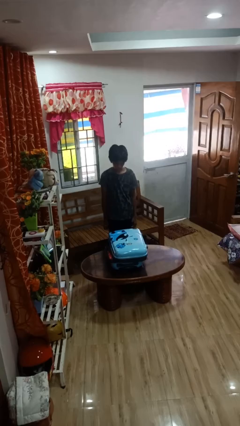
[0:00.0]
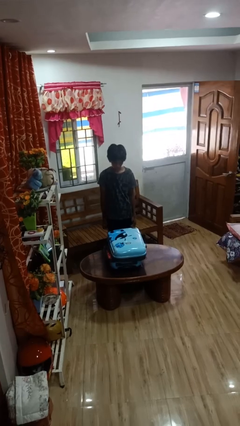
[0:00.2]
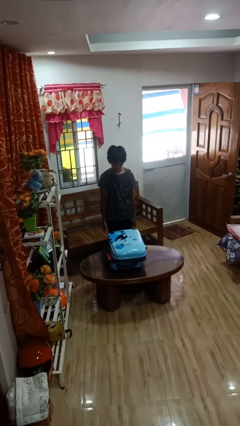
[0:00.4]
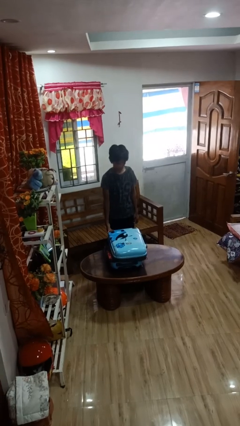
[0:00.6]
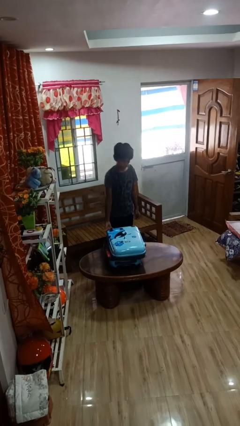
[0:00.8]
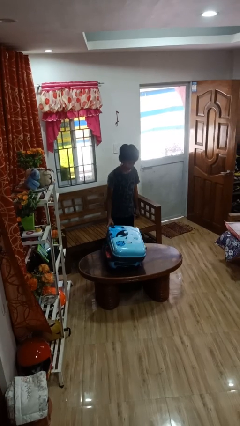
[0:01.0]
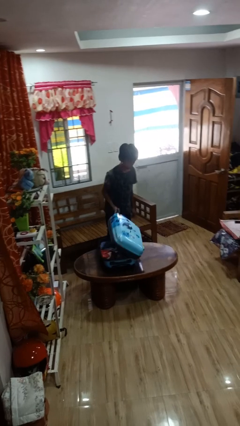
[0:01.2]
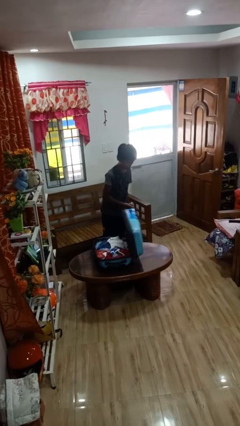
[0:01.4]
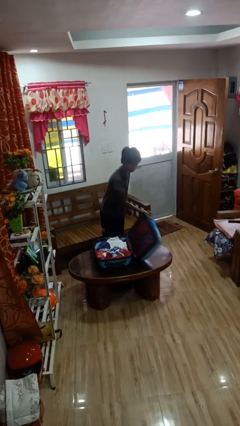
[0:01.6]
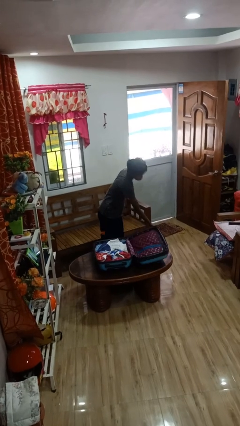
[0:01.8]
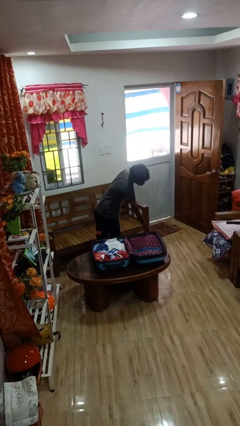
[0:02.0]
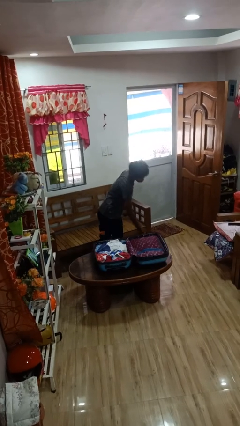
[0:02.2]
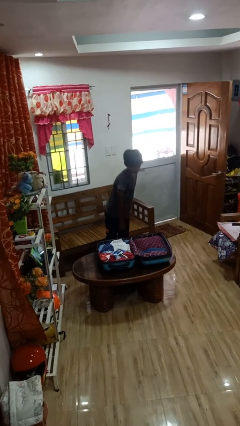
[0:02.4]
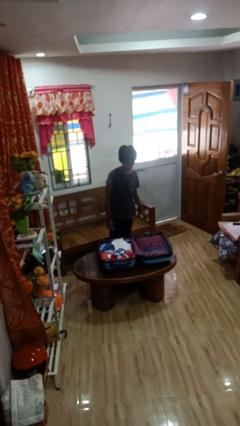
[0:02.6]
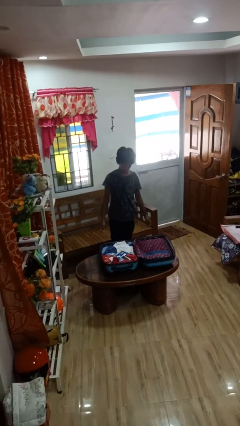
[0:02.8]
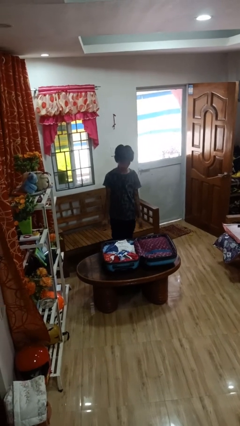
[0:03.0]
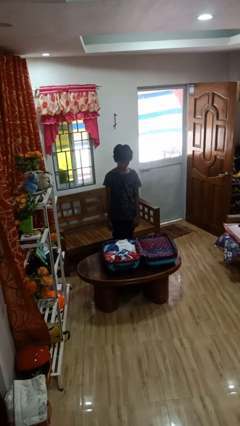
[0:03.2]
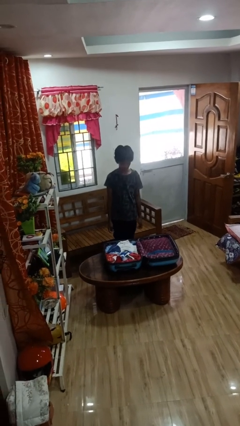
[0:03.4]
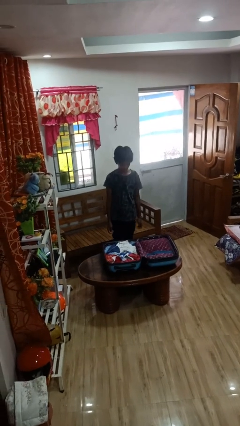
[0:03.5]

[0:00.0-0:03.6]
person opens suitcase

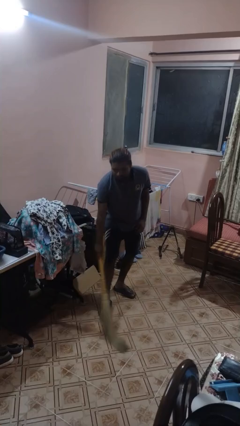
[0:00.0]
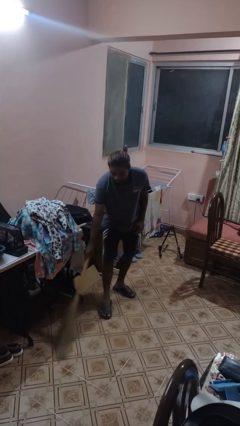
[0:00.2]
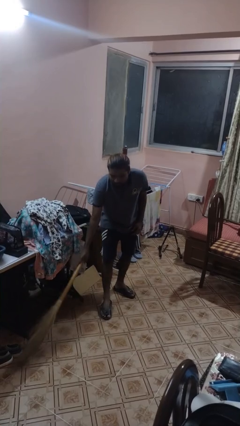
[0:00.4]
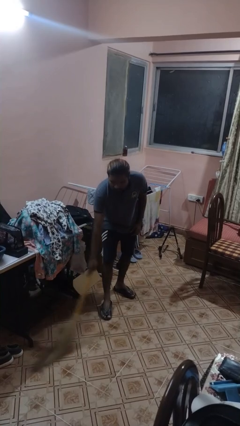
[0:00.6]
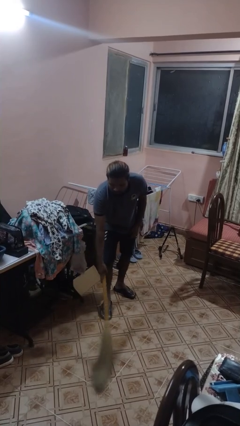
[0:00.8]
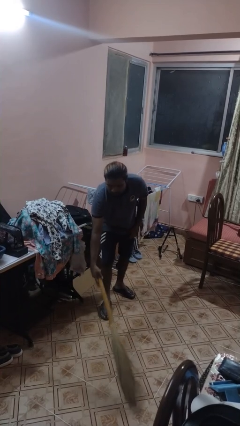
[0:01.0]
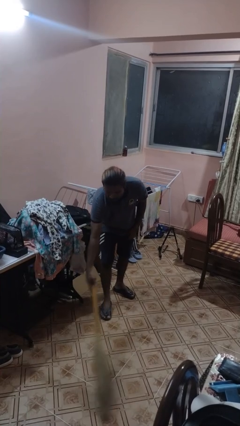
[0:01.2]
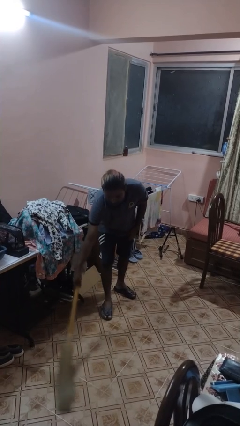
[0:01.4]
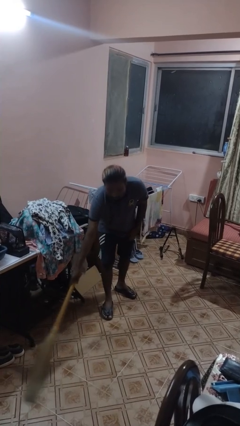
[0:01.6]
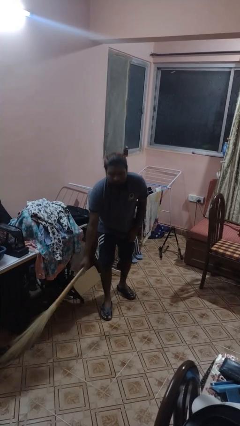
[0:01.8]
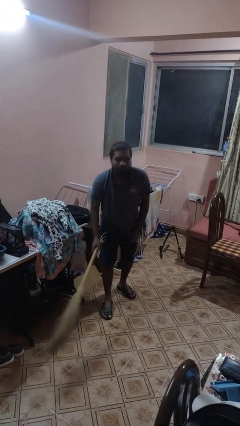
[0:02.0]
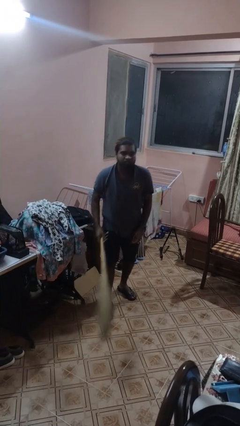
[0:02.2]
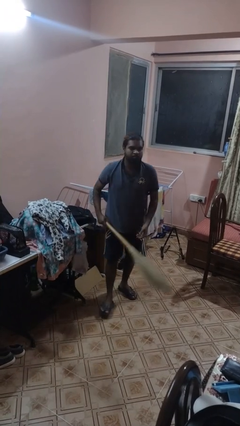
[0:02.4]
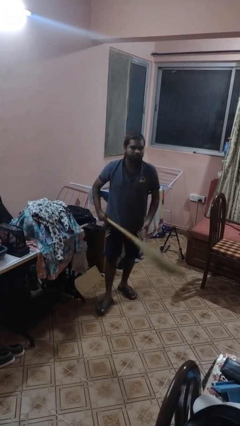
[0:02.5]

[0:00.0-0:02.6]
person sweeps floor

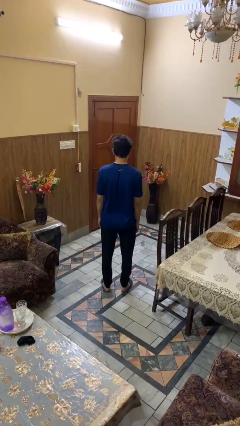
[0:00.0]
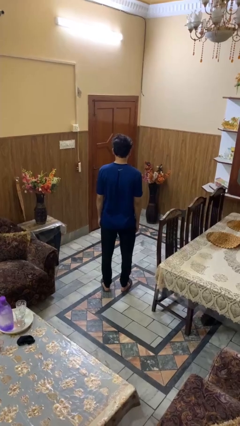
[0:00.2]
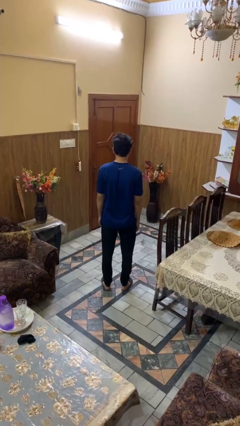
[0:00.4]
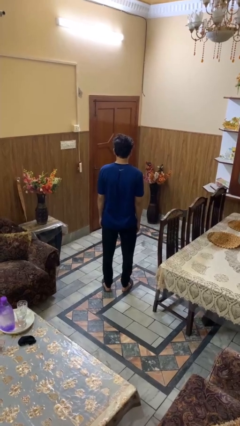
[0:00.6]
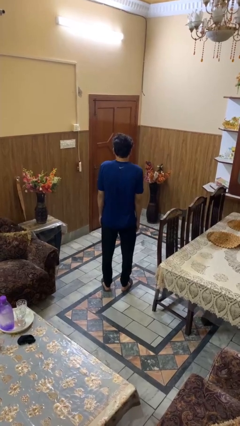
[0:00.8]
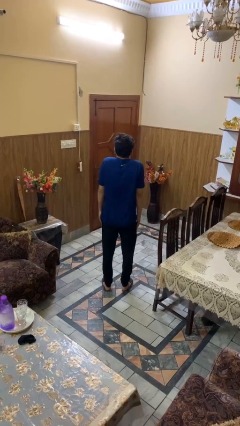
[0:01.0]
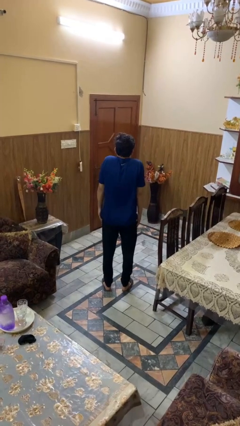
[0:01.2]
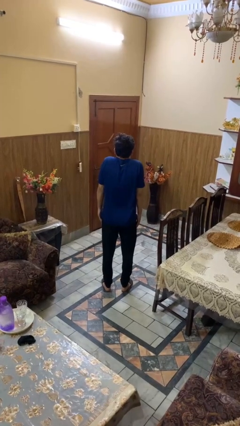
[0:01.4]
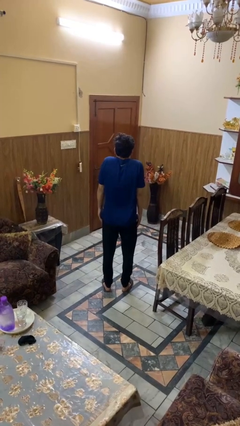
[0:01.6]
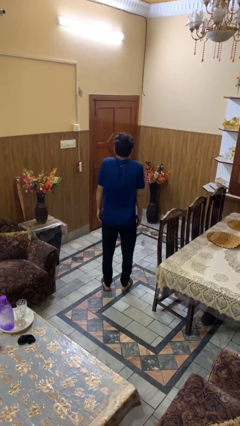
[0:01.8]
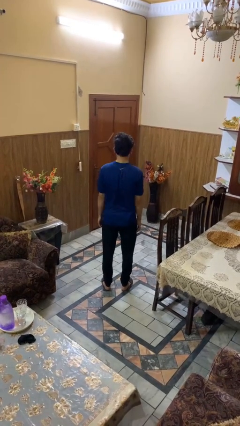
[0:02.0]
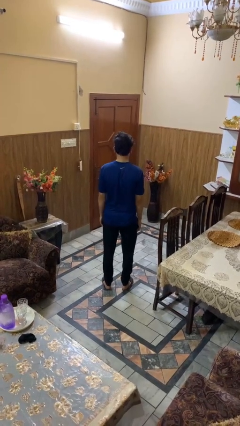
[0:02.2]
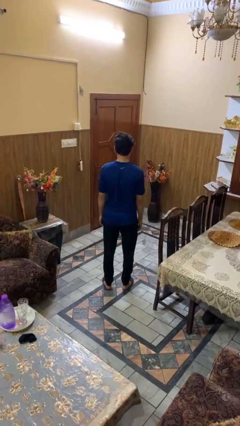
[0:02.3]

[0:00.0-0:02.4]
person shrugs

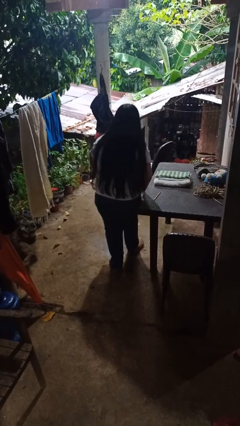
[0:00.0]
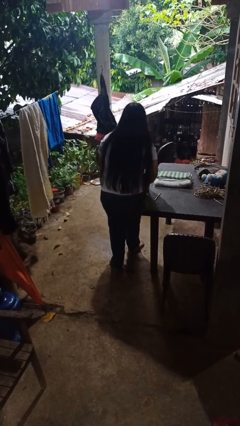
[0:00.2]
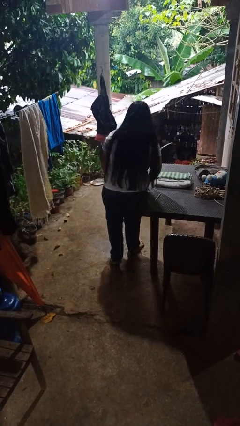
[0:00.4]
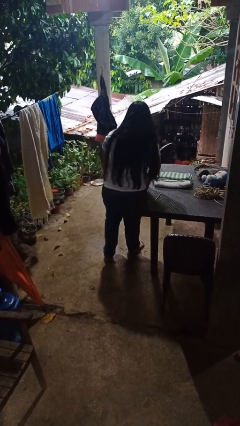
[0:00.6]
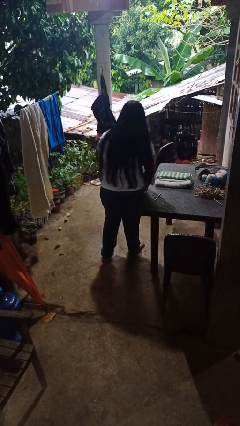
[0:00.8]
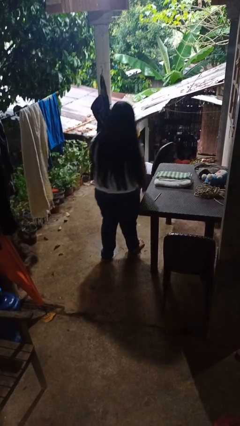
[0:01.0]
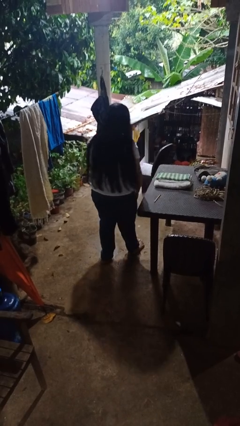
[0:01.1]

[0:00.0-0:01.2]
person bumps into table

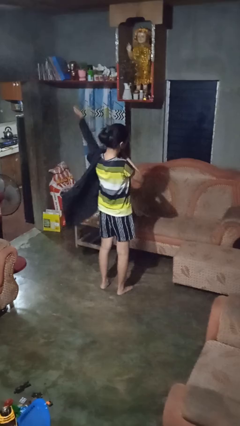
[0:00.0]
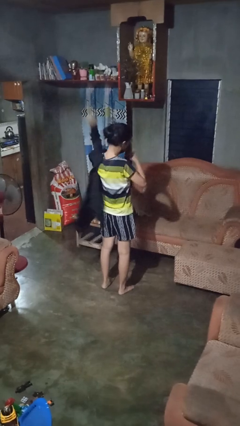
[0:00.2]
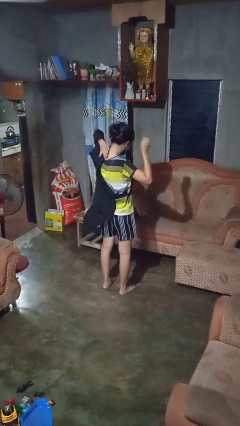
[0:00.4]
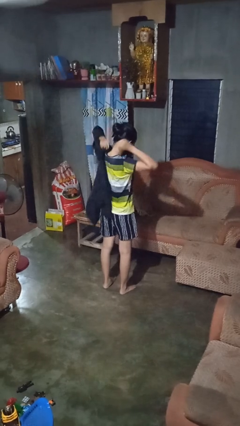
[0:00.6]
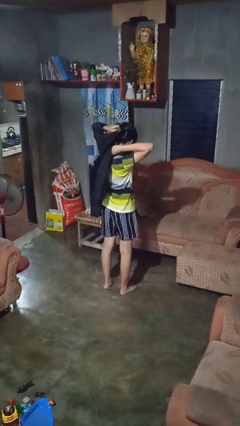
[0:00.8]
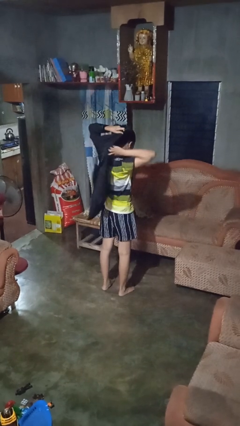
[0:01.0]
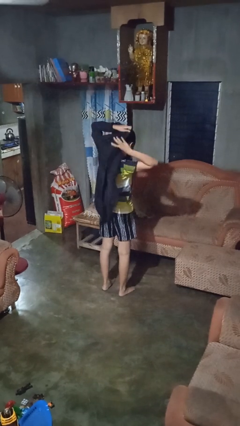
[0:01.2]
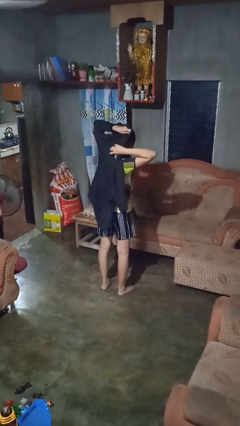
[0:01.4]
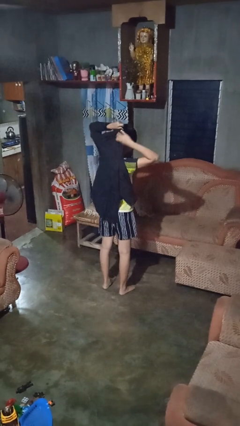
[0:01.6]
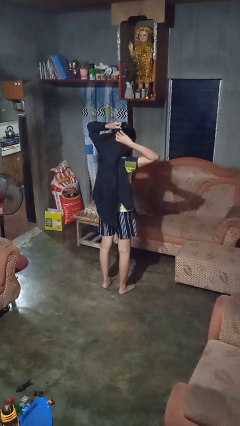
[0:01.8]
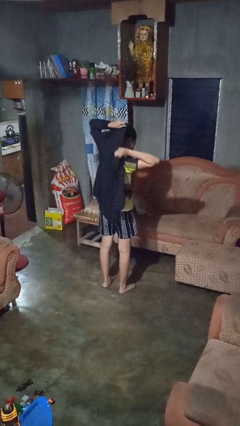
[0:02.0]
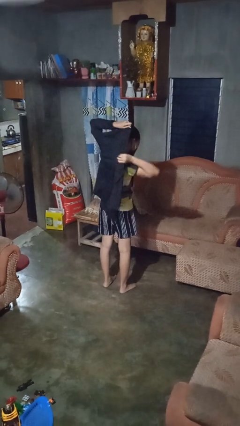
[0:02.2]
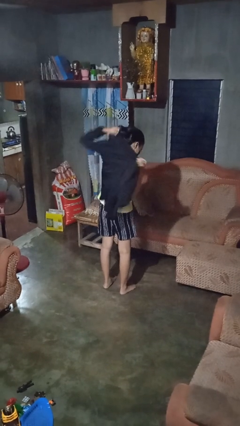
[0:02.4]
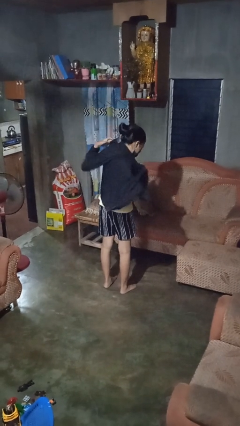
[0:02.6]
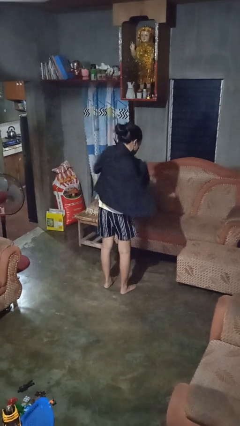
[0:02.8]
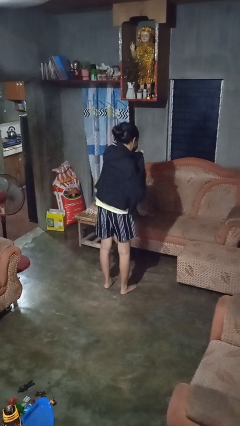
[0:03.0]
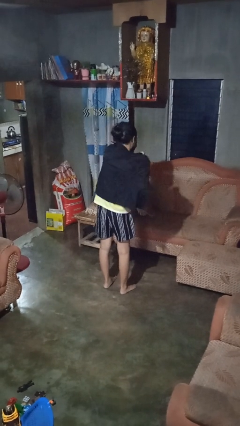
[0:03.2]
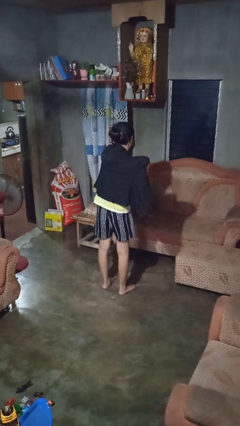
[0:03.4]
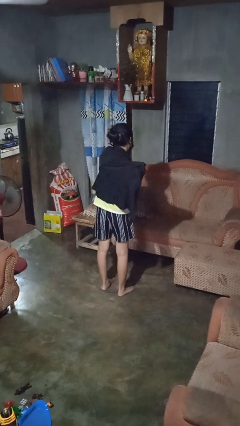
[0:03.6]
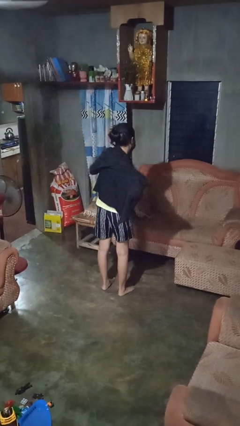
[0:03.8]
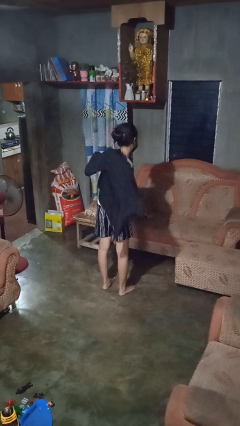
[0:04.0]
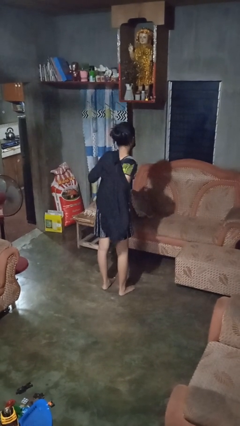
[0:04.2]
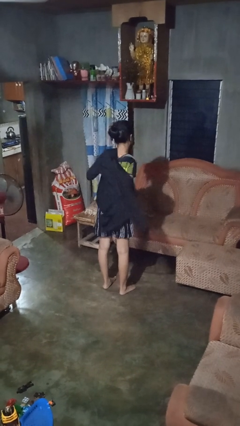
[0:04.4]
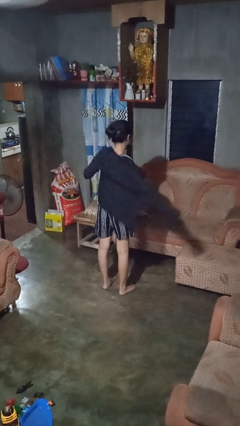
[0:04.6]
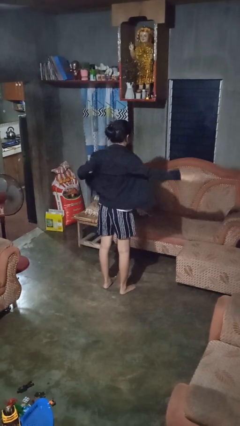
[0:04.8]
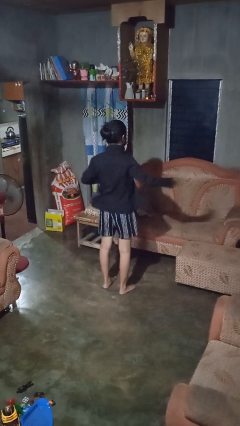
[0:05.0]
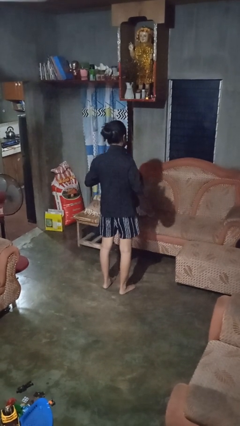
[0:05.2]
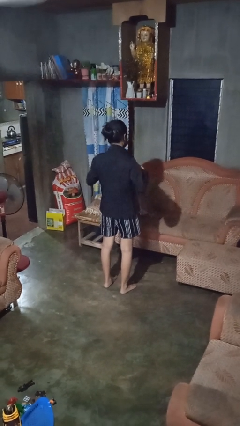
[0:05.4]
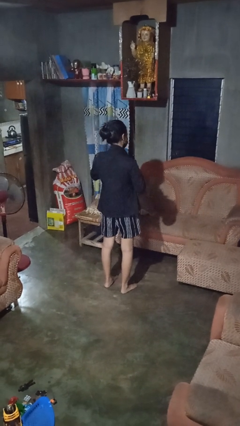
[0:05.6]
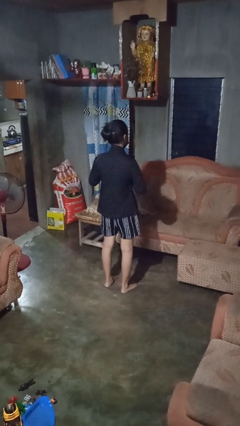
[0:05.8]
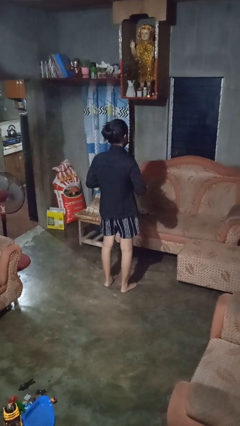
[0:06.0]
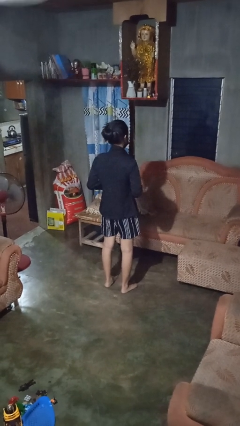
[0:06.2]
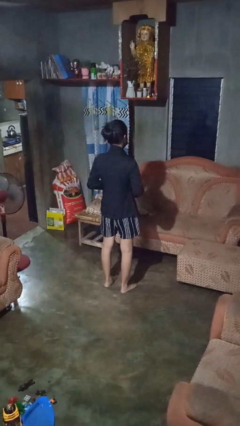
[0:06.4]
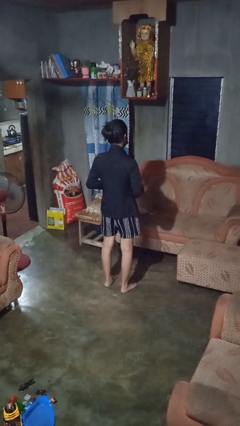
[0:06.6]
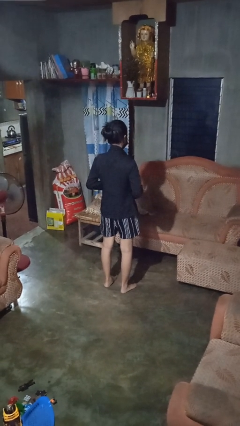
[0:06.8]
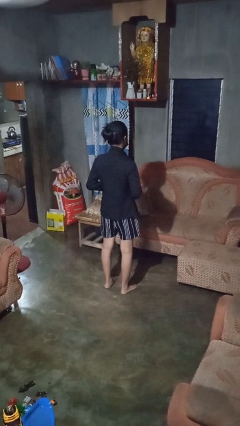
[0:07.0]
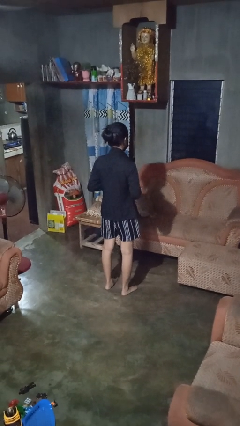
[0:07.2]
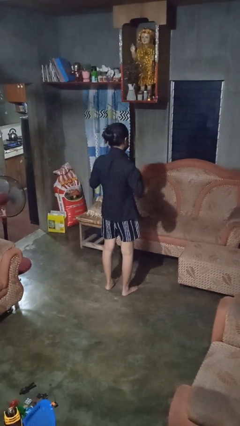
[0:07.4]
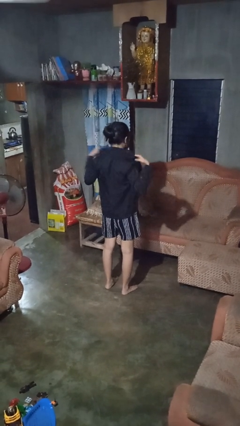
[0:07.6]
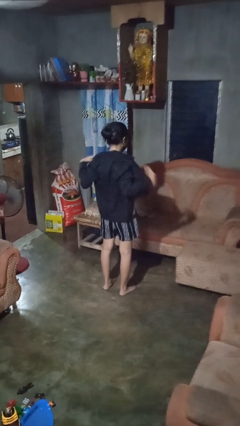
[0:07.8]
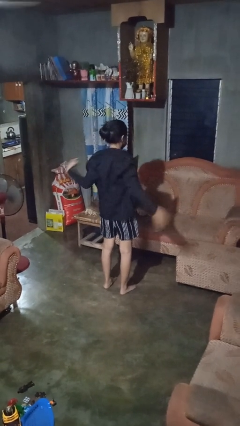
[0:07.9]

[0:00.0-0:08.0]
person puts on shirt
